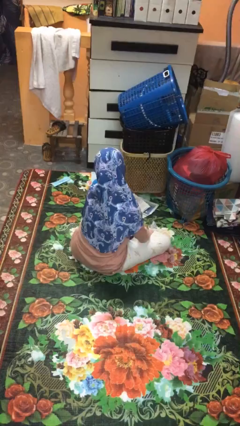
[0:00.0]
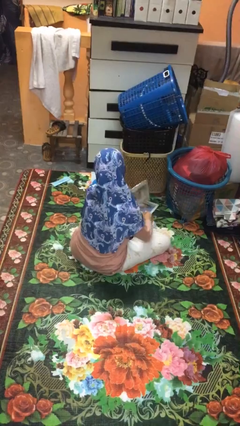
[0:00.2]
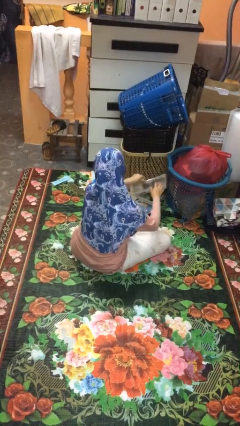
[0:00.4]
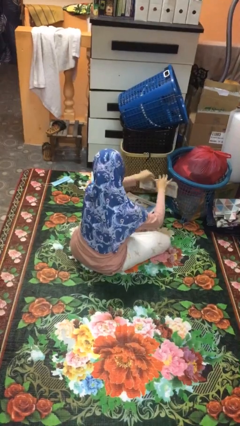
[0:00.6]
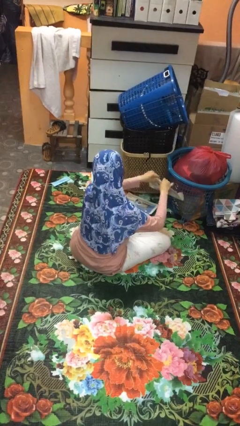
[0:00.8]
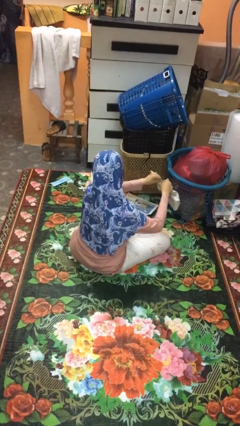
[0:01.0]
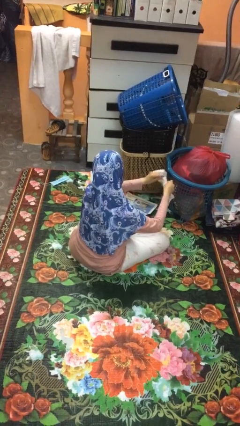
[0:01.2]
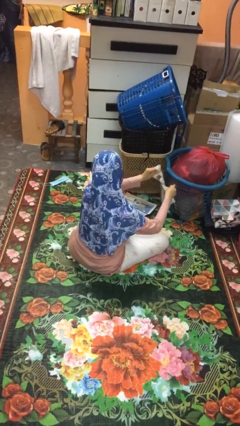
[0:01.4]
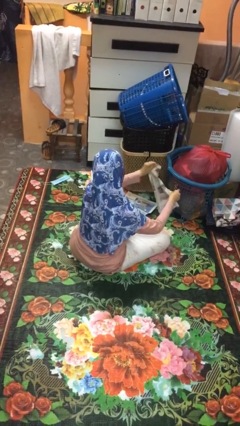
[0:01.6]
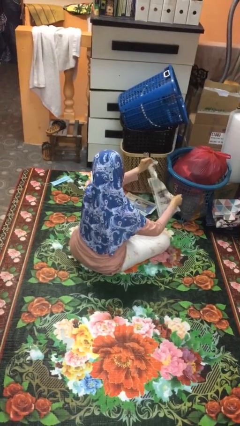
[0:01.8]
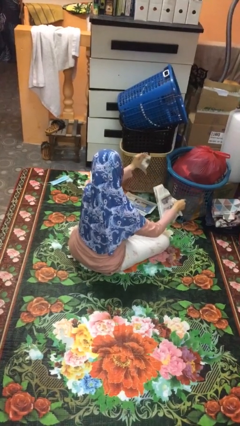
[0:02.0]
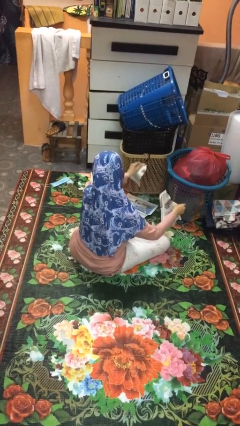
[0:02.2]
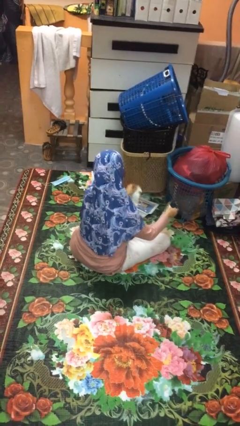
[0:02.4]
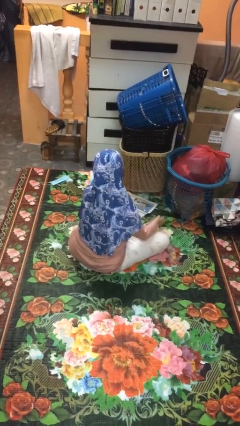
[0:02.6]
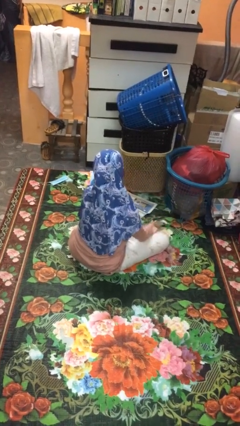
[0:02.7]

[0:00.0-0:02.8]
person tears paper

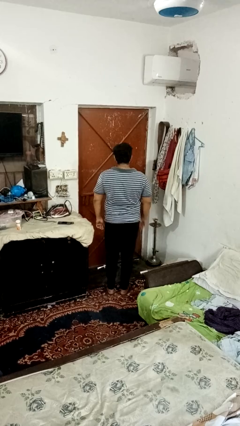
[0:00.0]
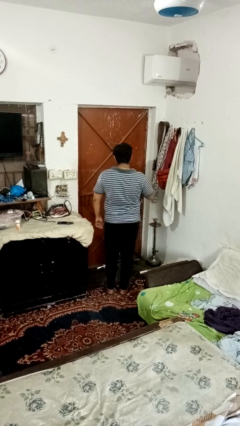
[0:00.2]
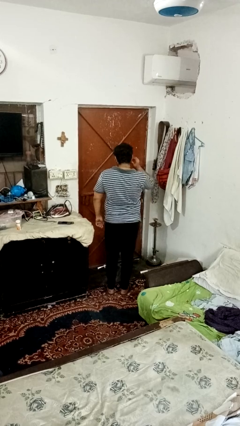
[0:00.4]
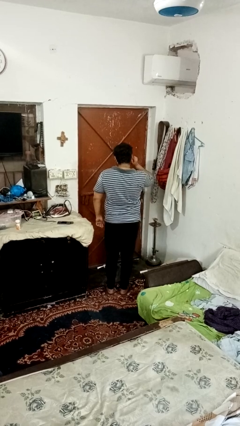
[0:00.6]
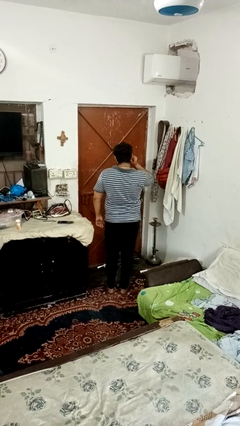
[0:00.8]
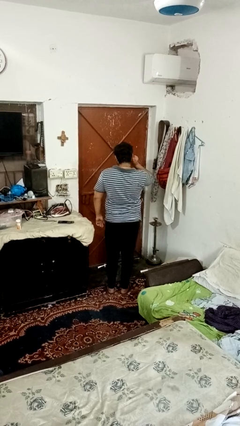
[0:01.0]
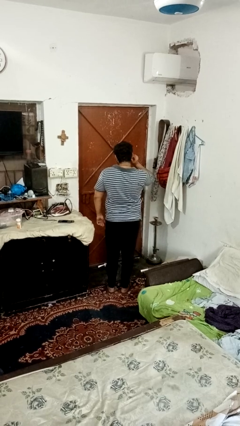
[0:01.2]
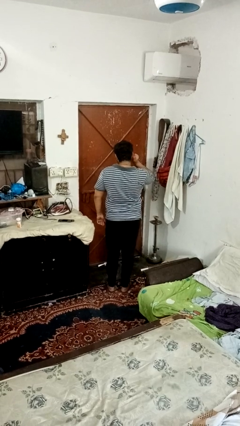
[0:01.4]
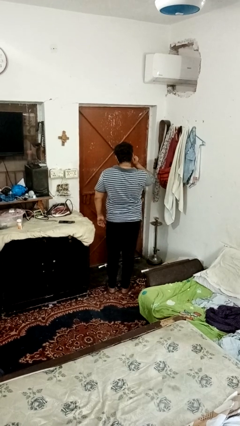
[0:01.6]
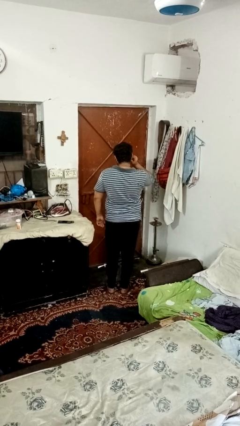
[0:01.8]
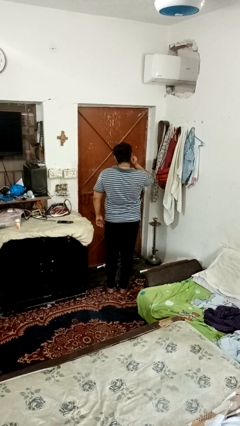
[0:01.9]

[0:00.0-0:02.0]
person touches earlobe

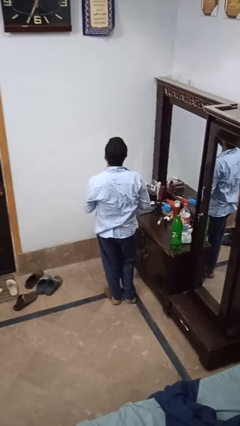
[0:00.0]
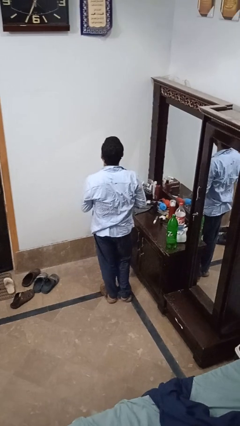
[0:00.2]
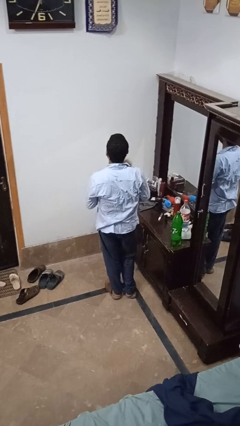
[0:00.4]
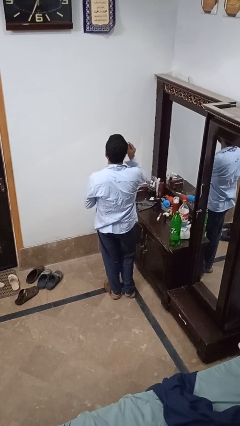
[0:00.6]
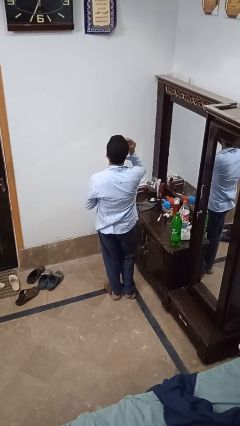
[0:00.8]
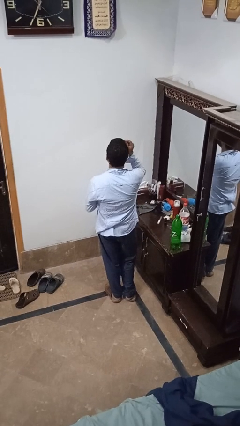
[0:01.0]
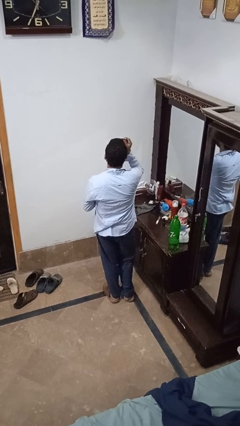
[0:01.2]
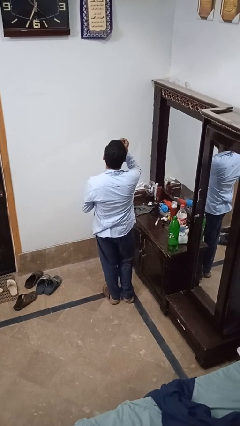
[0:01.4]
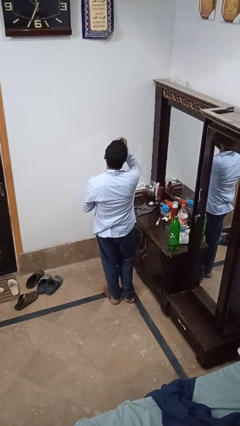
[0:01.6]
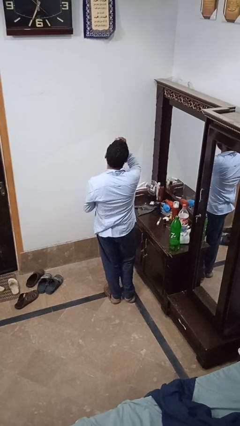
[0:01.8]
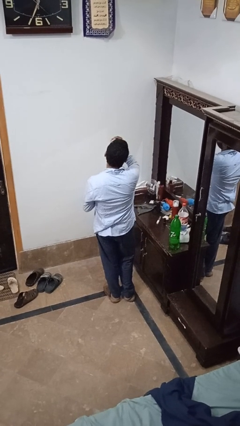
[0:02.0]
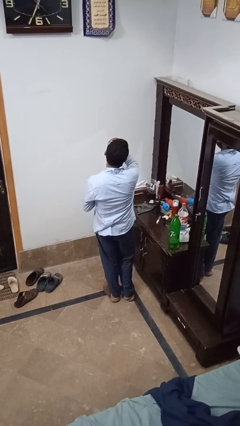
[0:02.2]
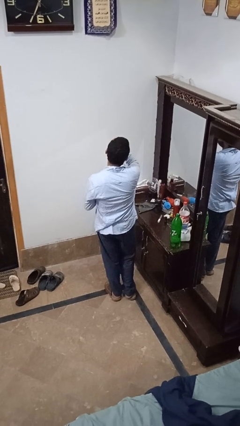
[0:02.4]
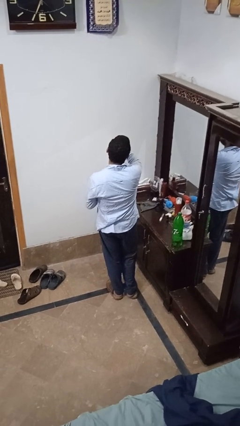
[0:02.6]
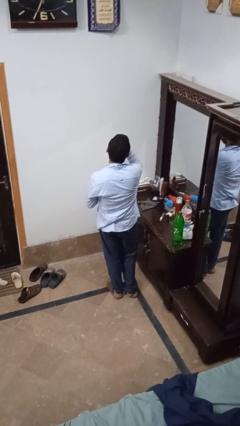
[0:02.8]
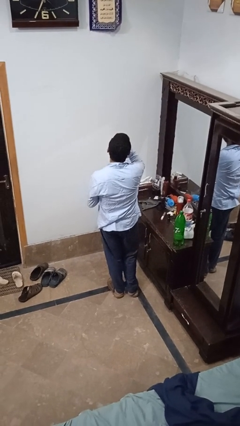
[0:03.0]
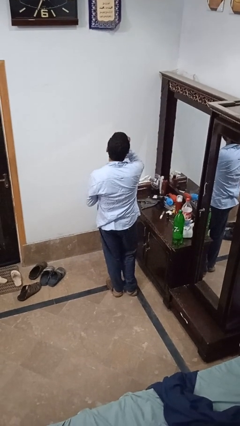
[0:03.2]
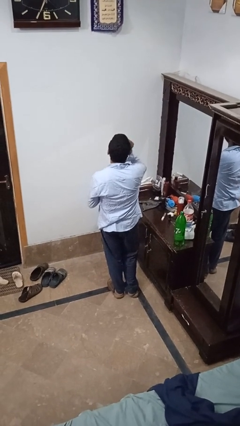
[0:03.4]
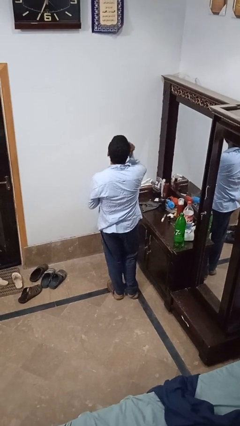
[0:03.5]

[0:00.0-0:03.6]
person applies foundation makeup

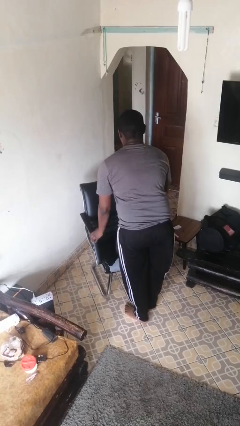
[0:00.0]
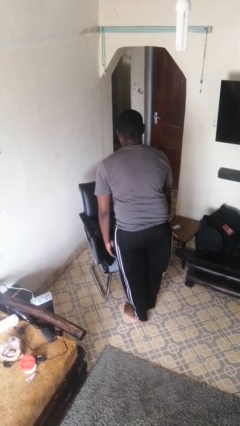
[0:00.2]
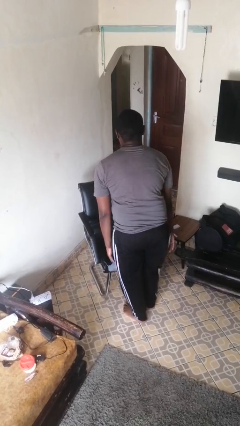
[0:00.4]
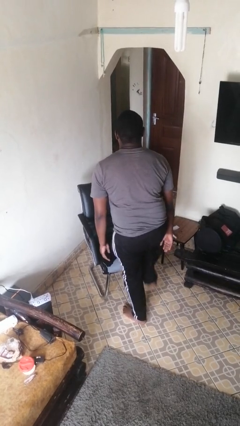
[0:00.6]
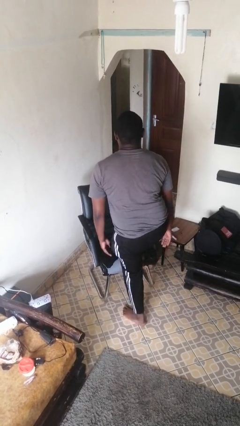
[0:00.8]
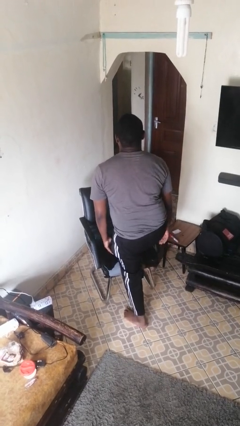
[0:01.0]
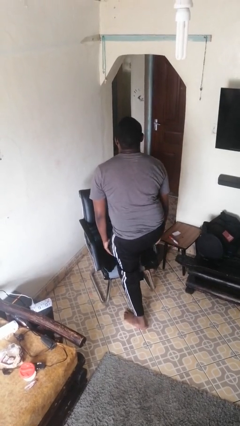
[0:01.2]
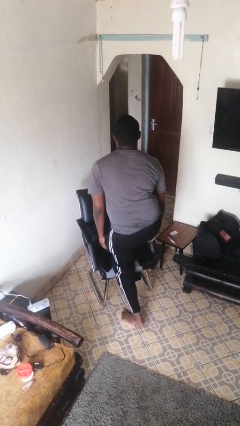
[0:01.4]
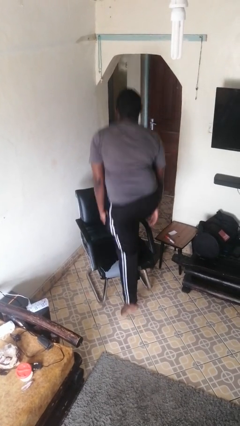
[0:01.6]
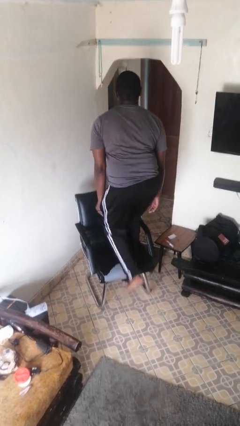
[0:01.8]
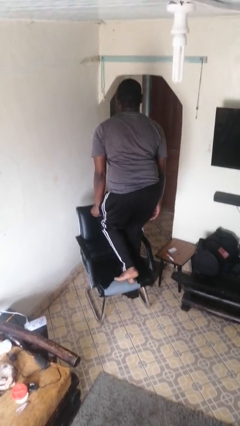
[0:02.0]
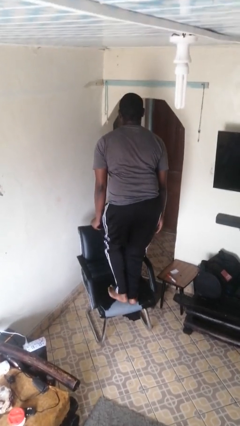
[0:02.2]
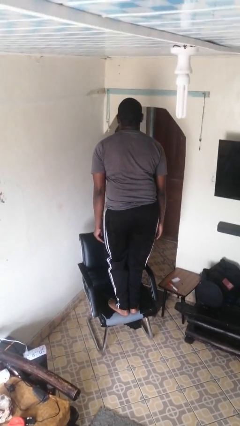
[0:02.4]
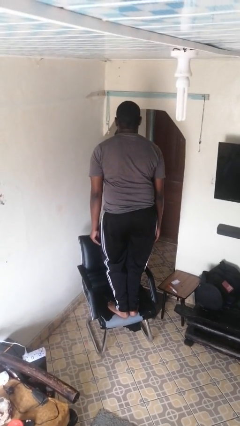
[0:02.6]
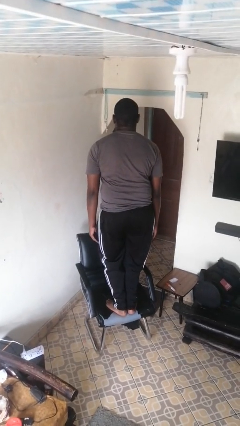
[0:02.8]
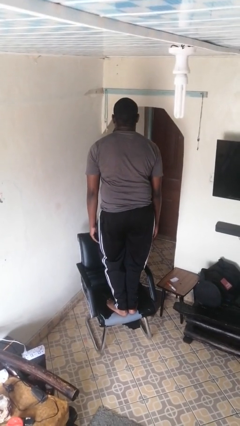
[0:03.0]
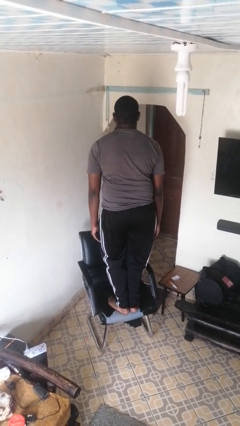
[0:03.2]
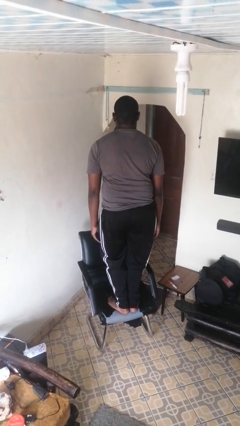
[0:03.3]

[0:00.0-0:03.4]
person climbs on chair

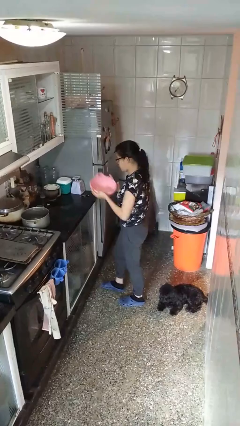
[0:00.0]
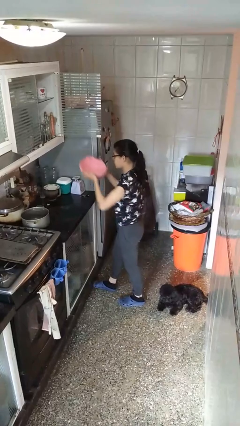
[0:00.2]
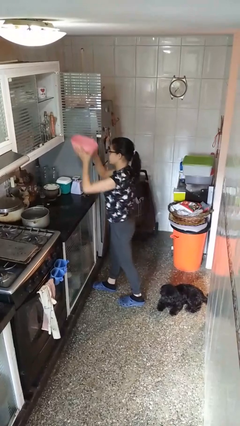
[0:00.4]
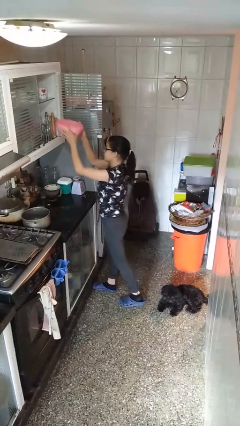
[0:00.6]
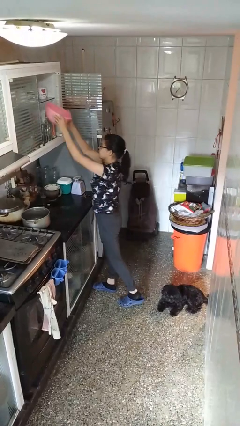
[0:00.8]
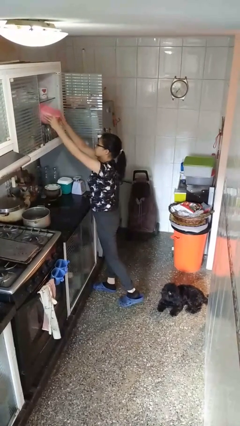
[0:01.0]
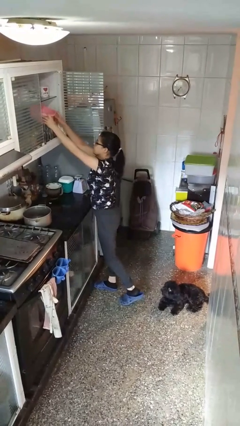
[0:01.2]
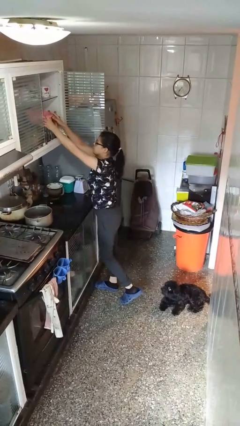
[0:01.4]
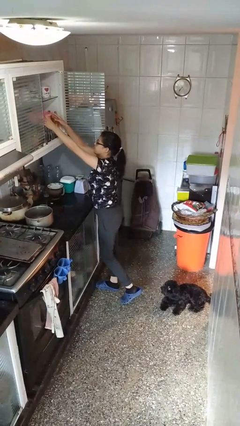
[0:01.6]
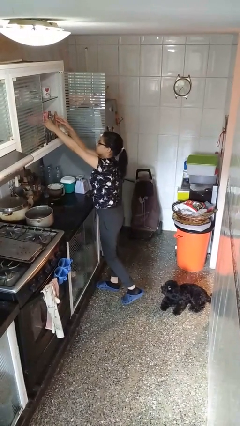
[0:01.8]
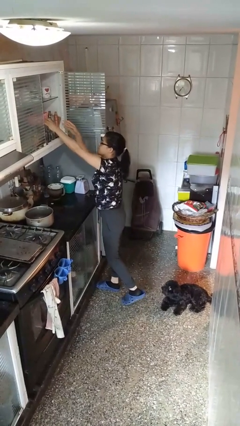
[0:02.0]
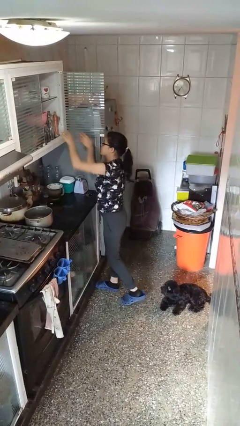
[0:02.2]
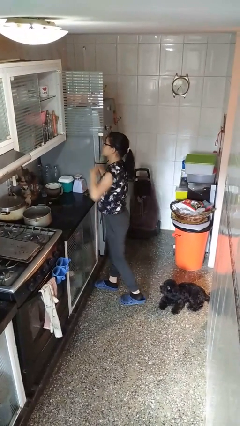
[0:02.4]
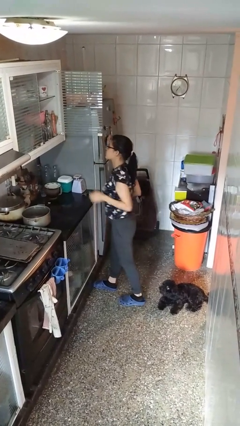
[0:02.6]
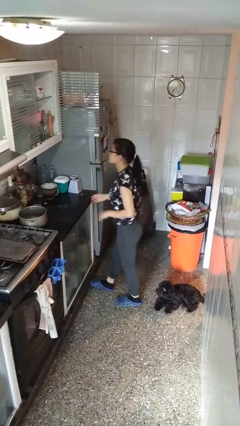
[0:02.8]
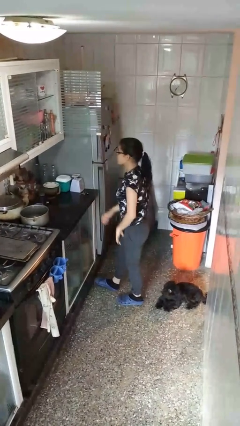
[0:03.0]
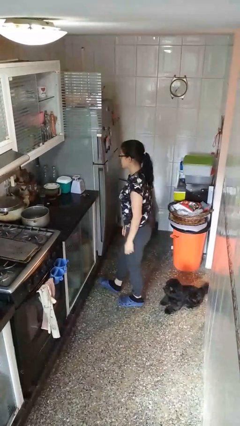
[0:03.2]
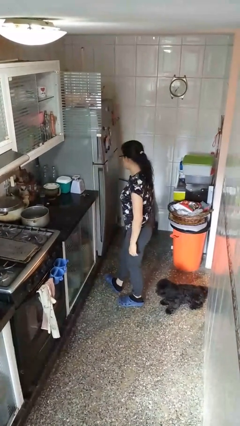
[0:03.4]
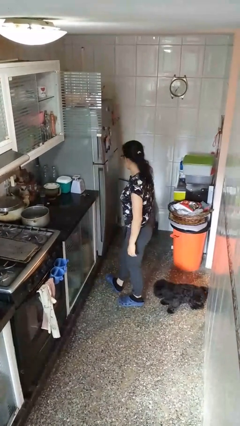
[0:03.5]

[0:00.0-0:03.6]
person puts down object into cabinet

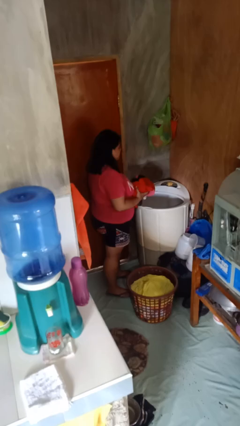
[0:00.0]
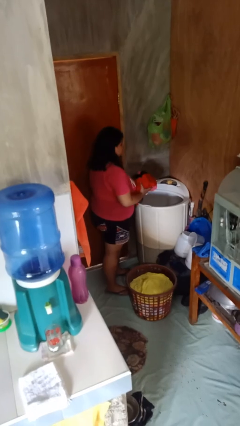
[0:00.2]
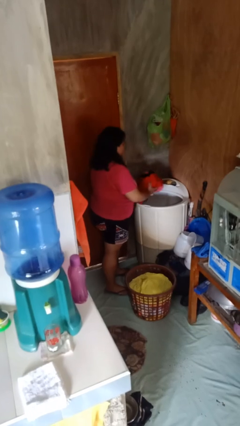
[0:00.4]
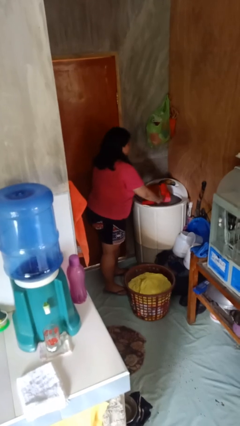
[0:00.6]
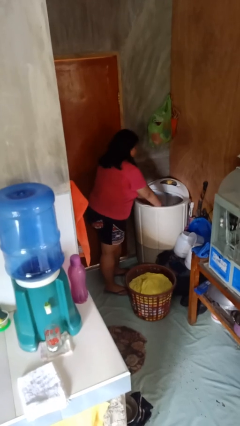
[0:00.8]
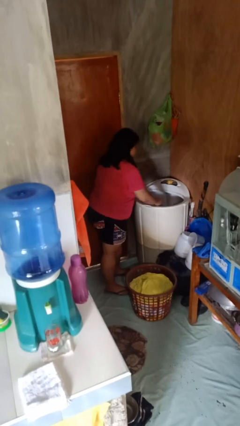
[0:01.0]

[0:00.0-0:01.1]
person loads clotheswasher

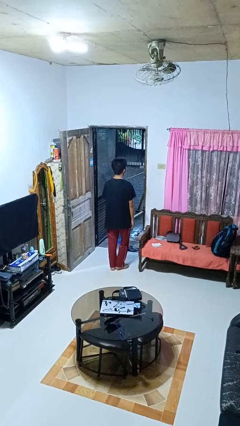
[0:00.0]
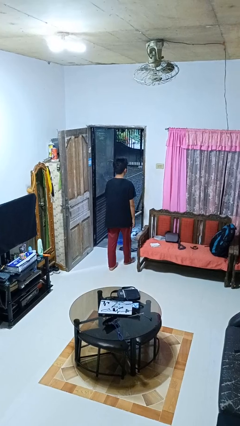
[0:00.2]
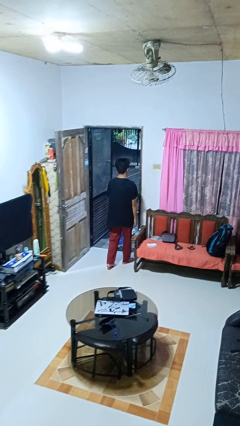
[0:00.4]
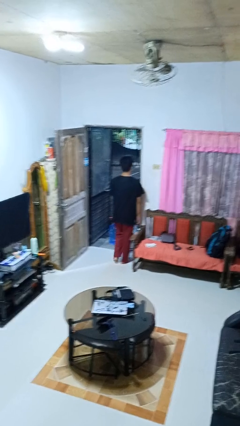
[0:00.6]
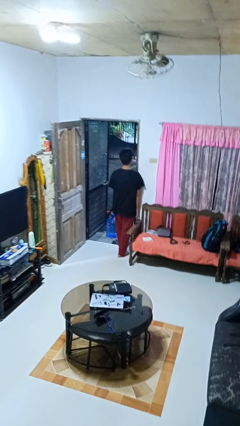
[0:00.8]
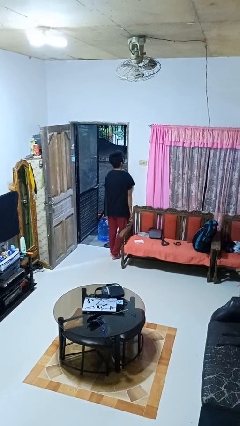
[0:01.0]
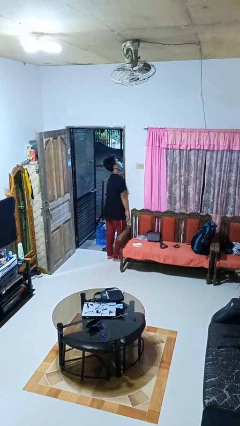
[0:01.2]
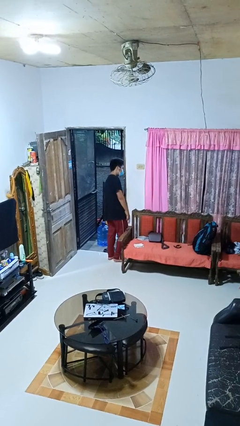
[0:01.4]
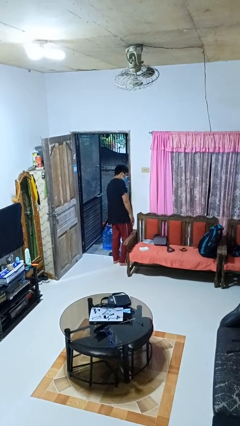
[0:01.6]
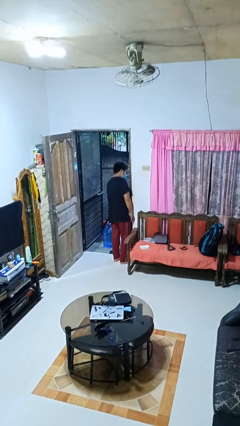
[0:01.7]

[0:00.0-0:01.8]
person bumps into wall
